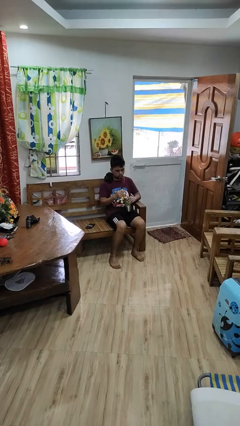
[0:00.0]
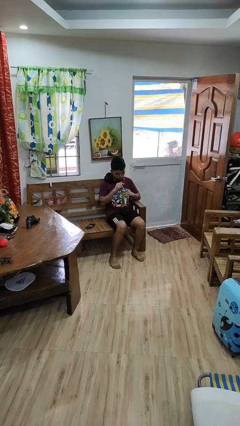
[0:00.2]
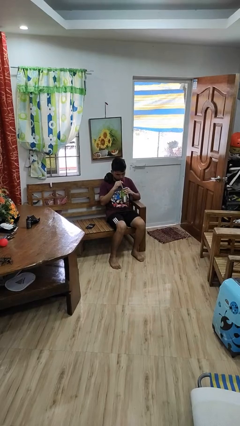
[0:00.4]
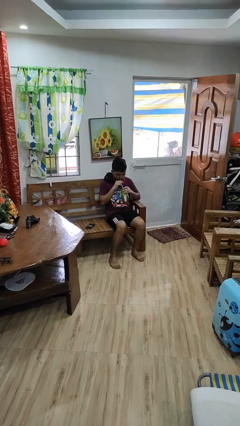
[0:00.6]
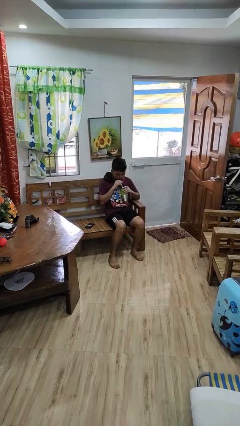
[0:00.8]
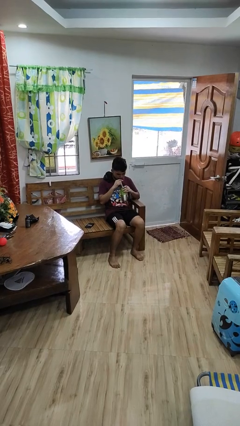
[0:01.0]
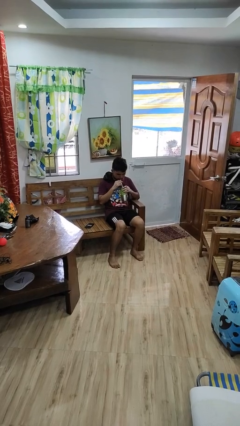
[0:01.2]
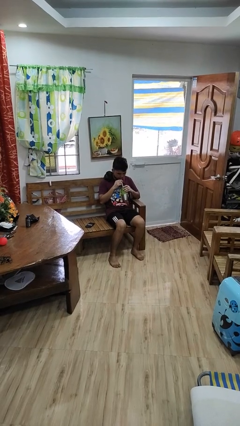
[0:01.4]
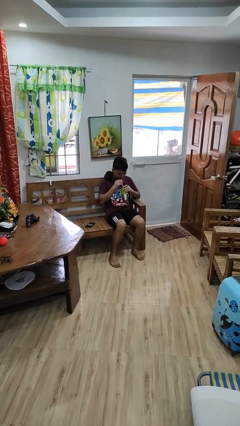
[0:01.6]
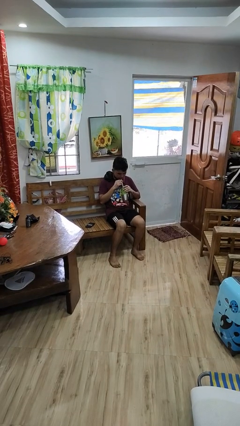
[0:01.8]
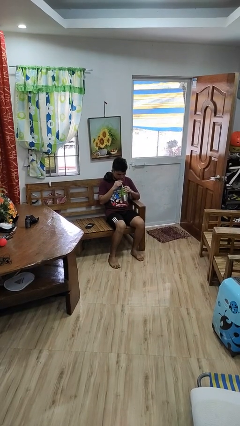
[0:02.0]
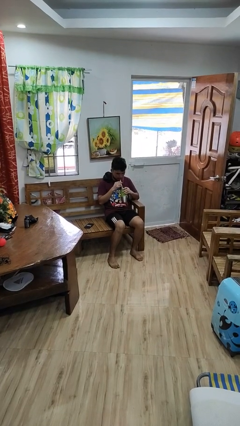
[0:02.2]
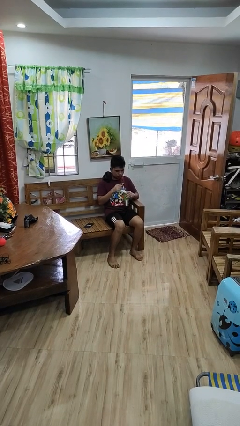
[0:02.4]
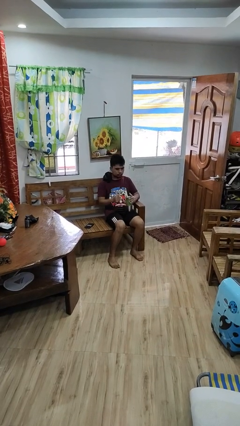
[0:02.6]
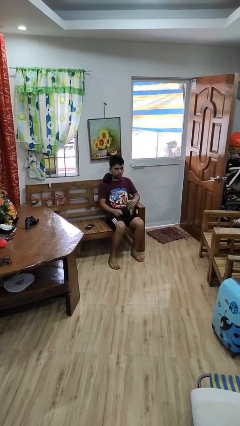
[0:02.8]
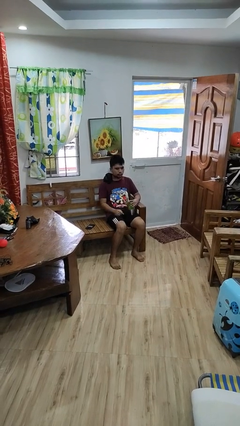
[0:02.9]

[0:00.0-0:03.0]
person drinks from straw

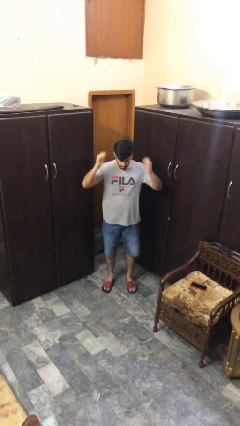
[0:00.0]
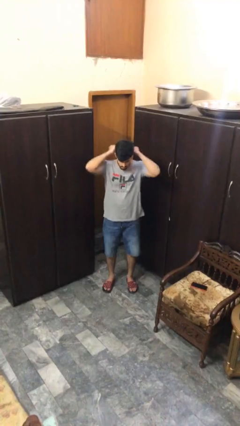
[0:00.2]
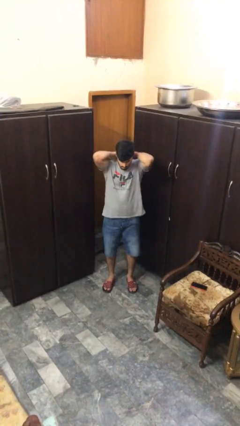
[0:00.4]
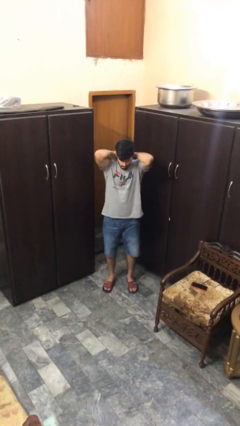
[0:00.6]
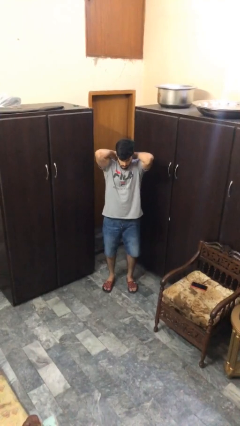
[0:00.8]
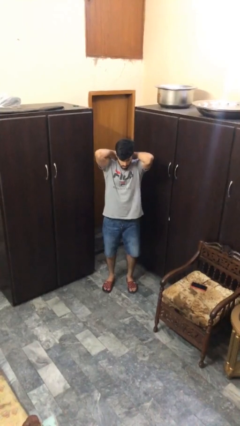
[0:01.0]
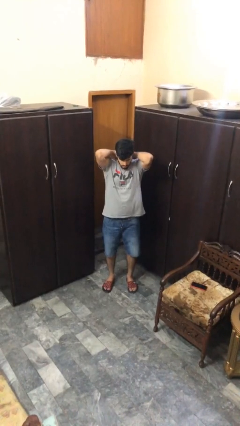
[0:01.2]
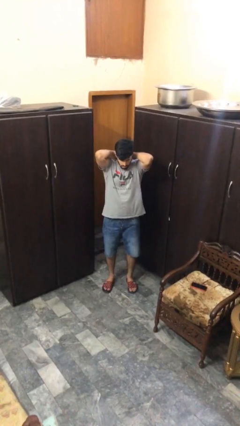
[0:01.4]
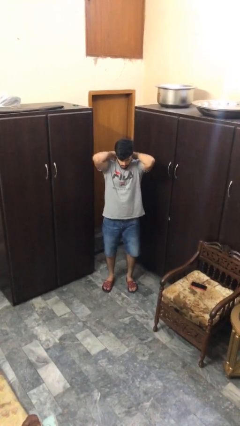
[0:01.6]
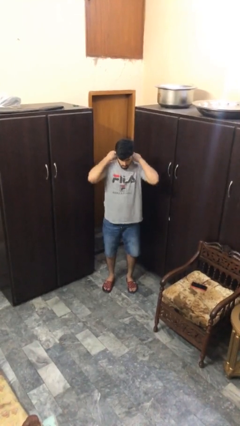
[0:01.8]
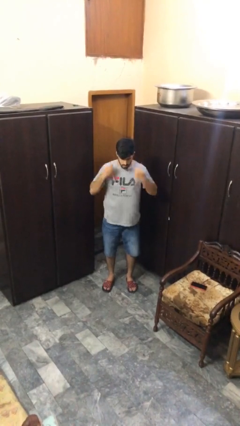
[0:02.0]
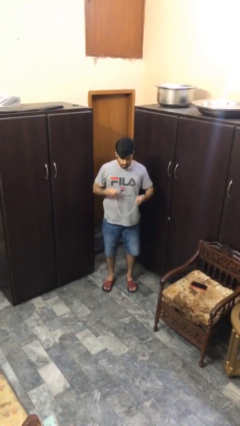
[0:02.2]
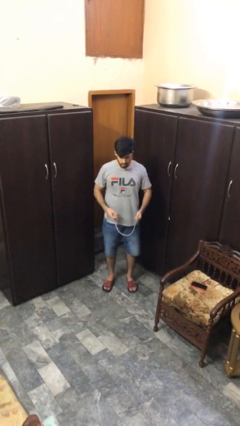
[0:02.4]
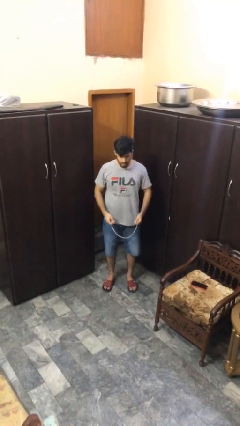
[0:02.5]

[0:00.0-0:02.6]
person takes off necklace

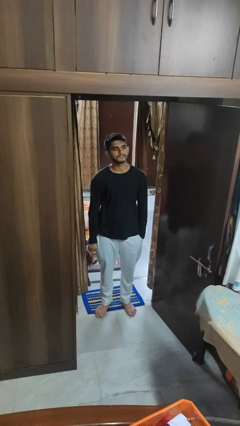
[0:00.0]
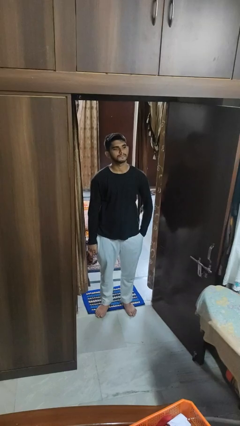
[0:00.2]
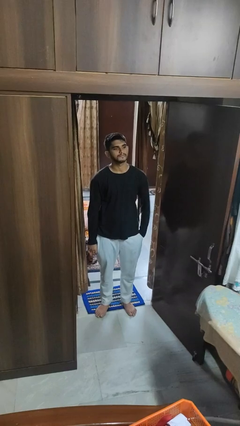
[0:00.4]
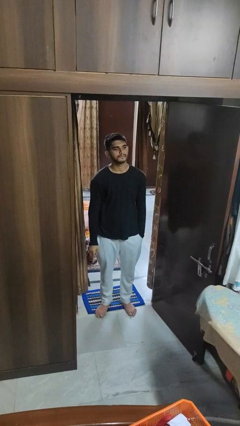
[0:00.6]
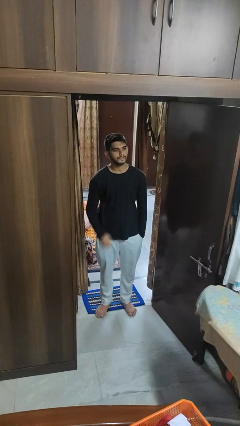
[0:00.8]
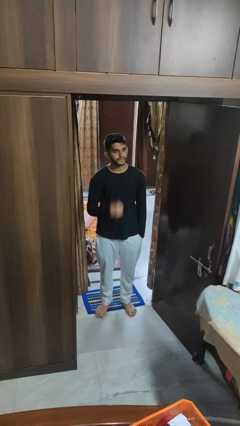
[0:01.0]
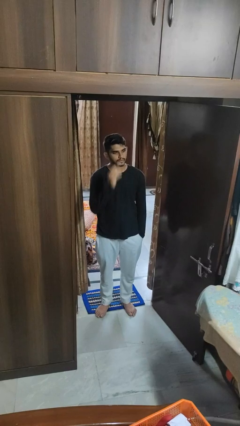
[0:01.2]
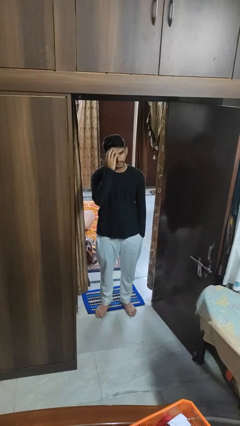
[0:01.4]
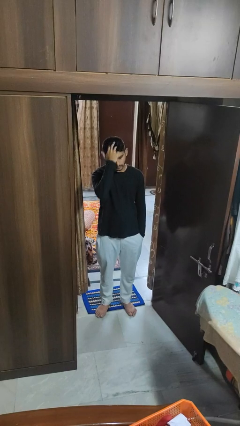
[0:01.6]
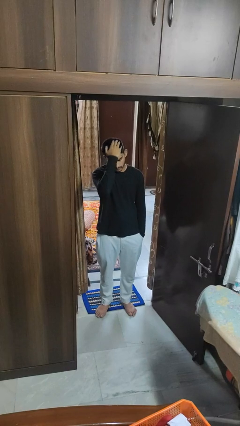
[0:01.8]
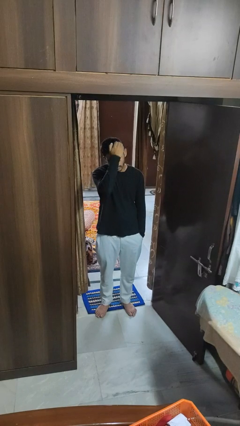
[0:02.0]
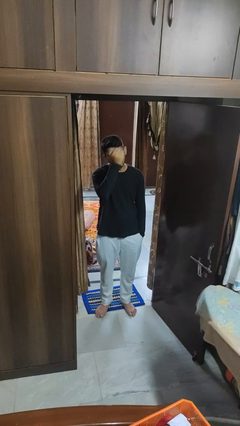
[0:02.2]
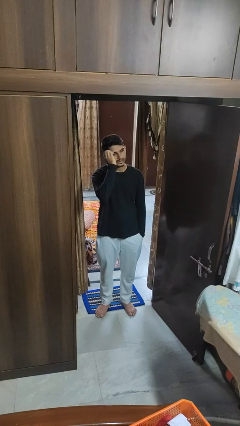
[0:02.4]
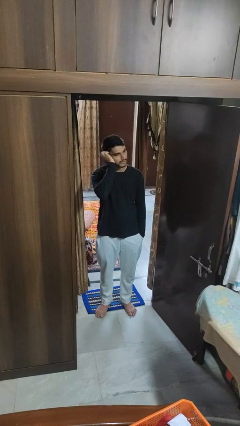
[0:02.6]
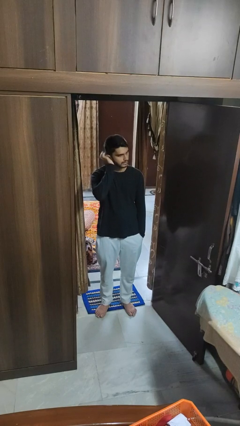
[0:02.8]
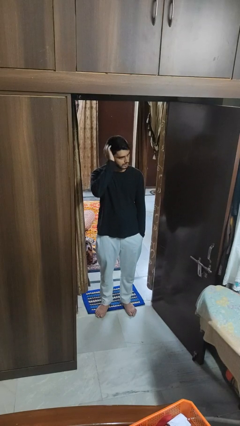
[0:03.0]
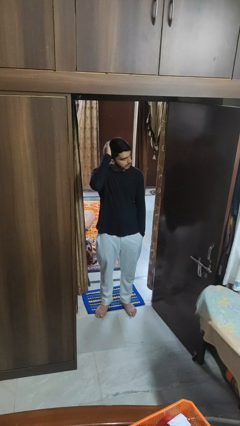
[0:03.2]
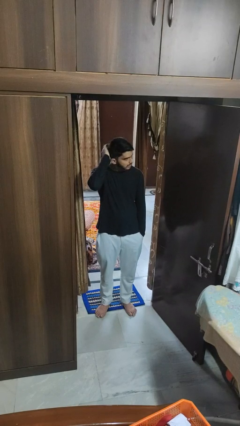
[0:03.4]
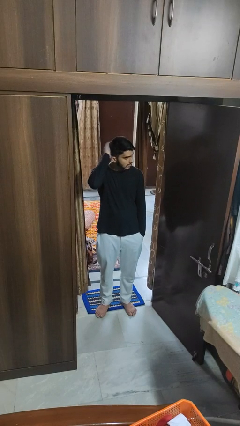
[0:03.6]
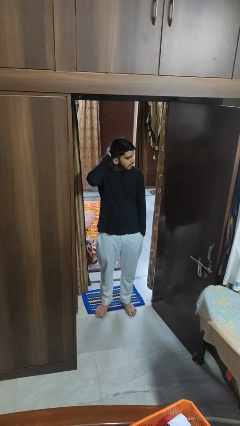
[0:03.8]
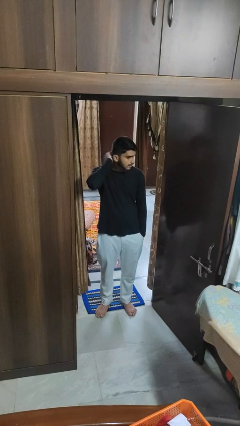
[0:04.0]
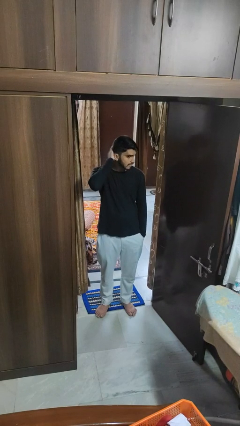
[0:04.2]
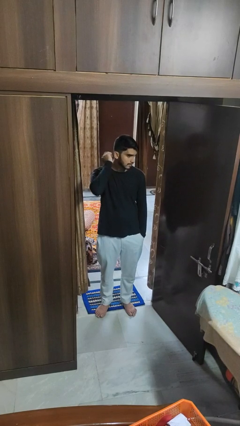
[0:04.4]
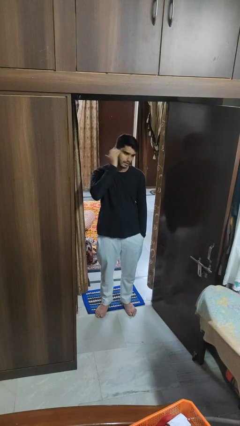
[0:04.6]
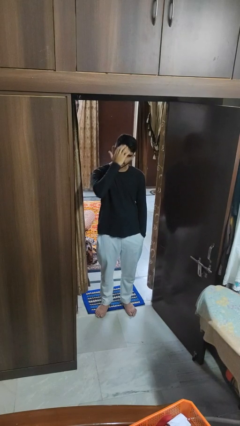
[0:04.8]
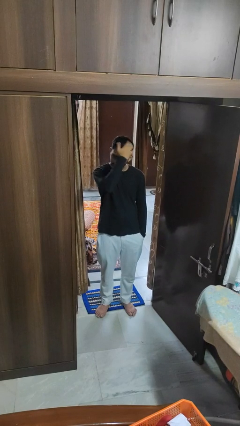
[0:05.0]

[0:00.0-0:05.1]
person strokes hair

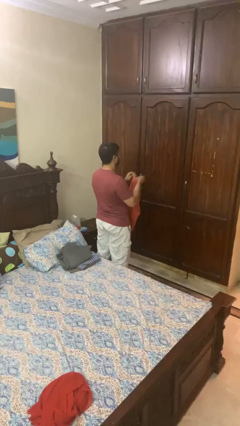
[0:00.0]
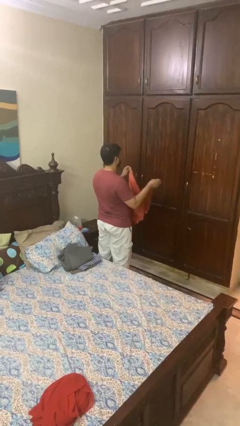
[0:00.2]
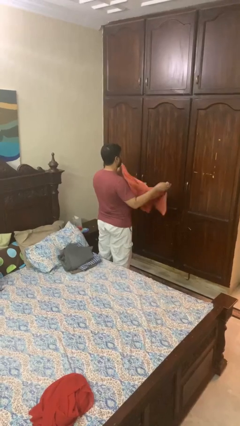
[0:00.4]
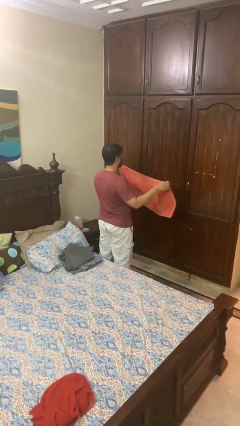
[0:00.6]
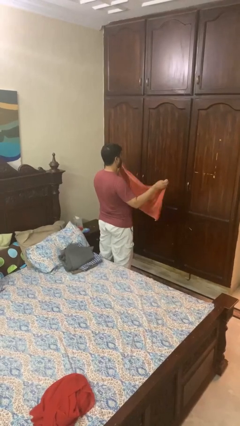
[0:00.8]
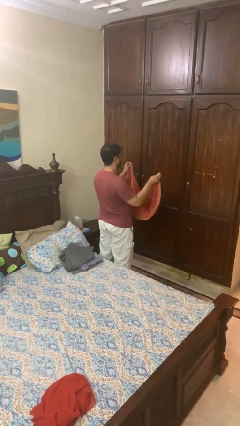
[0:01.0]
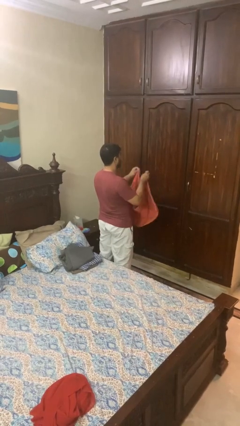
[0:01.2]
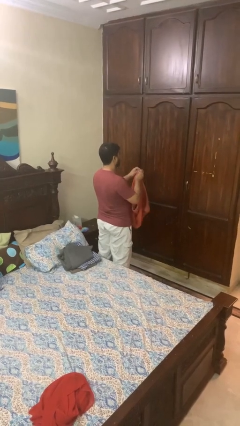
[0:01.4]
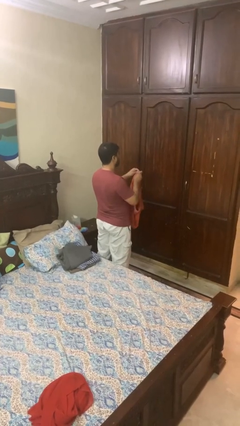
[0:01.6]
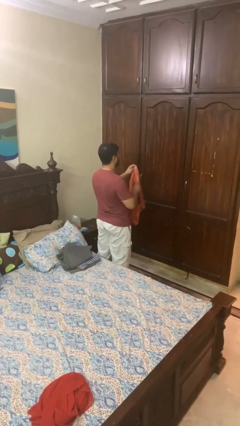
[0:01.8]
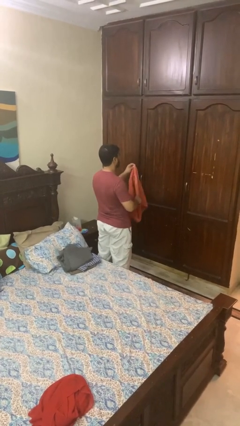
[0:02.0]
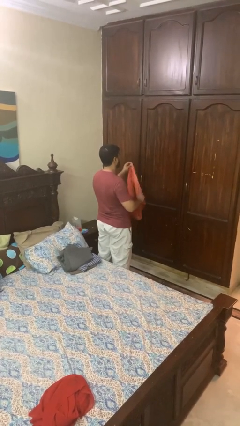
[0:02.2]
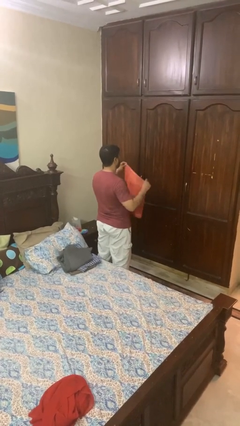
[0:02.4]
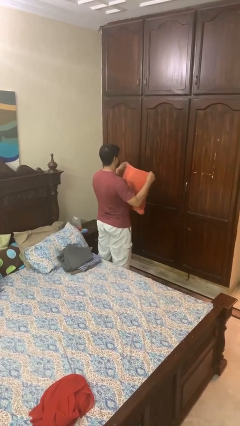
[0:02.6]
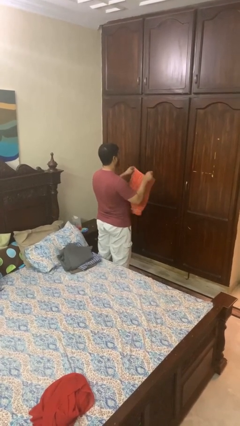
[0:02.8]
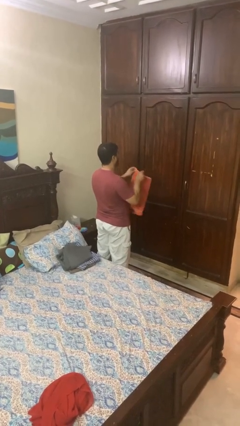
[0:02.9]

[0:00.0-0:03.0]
person folds towel

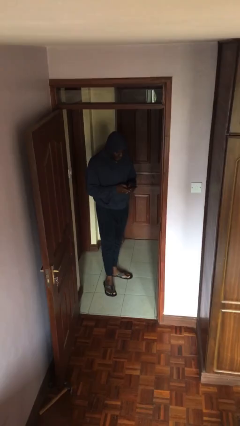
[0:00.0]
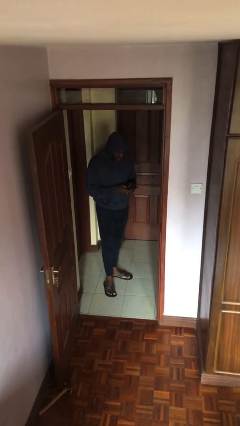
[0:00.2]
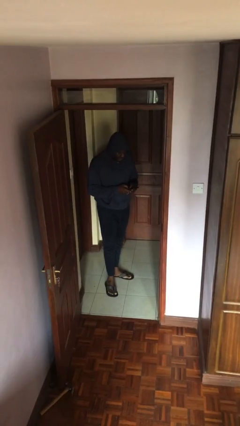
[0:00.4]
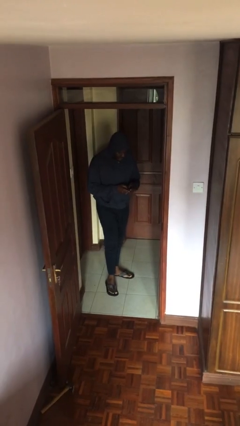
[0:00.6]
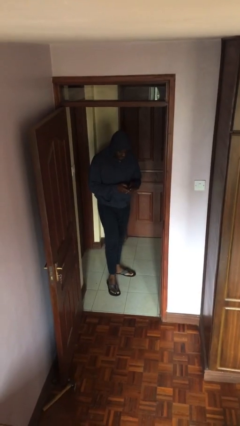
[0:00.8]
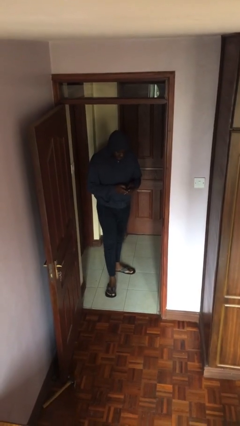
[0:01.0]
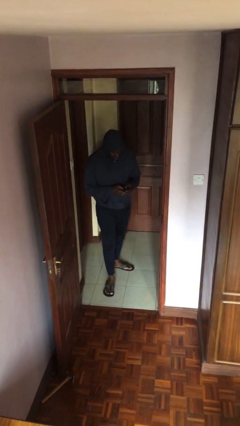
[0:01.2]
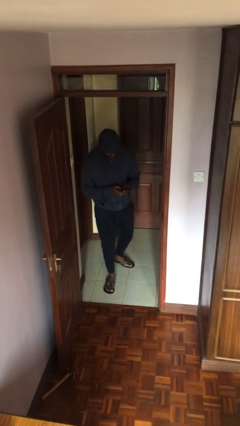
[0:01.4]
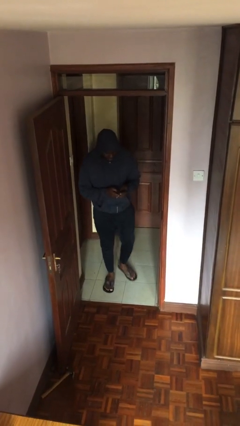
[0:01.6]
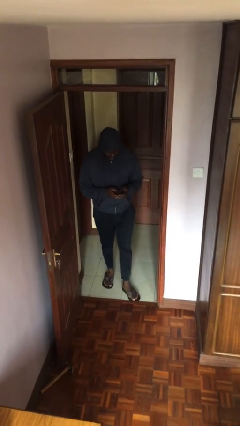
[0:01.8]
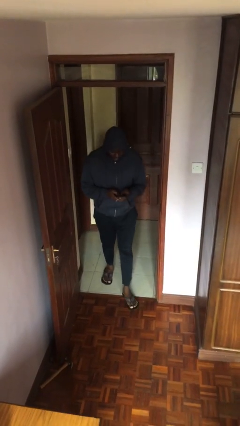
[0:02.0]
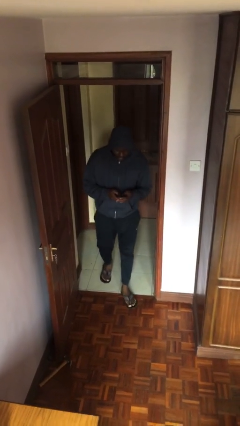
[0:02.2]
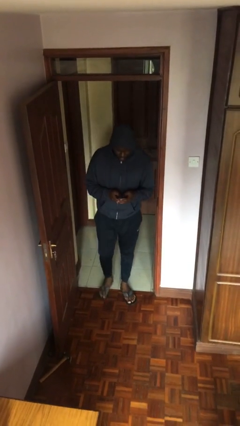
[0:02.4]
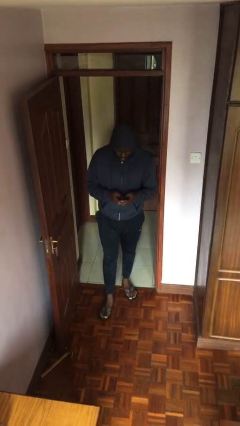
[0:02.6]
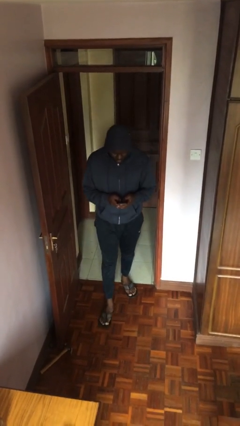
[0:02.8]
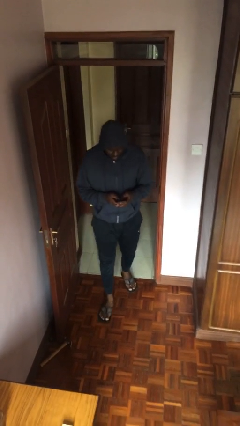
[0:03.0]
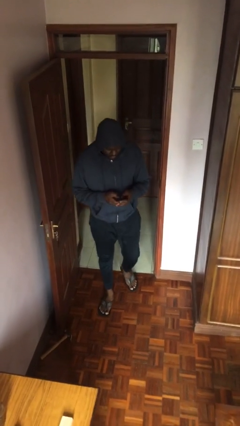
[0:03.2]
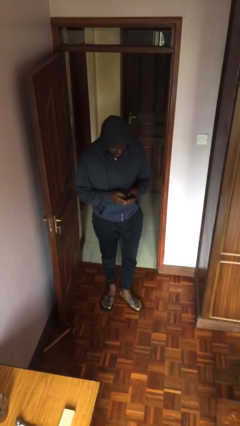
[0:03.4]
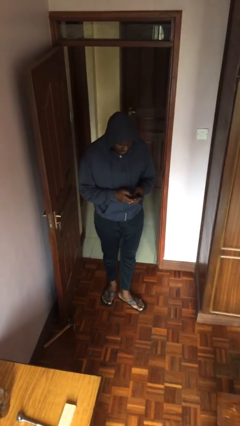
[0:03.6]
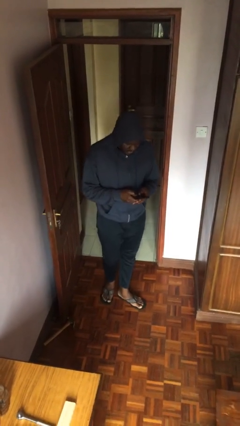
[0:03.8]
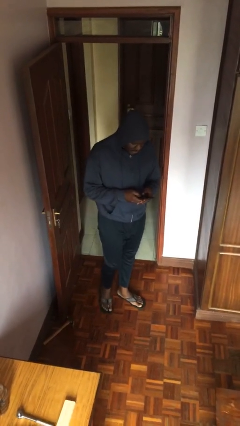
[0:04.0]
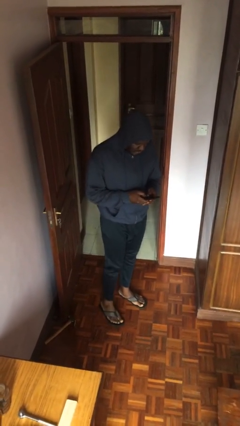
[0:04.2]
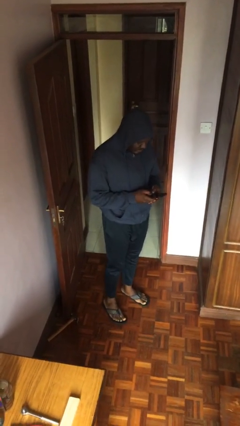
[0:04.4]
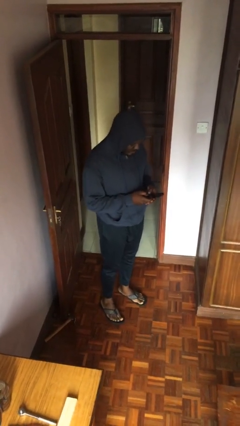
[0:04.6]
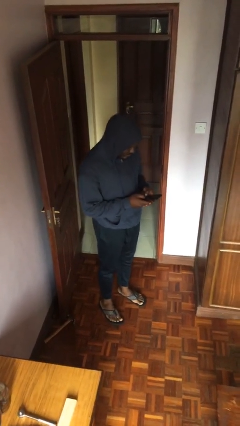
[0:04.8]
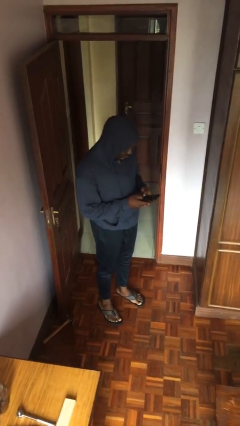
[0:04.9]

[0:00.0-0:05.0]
person enters scene through structure
